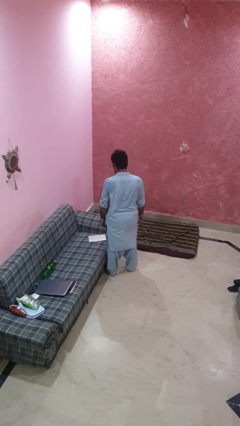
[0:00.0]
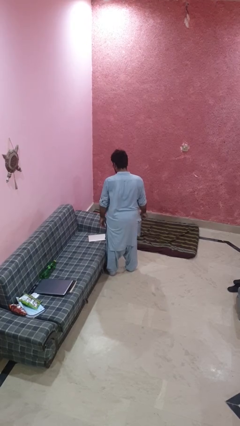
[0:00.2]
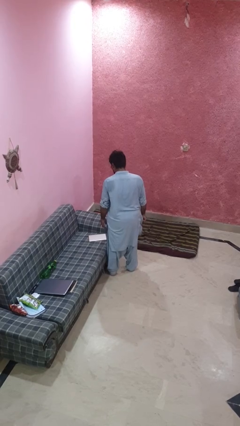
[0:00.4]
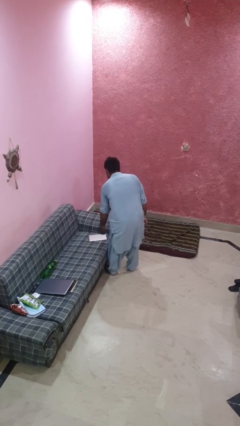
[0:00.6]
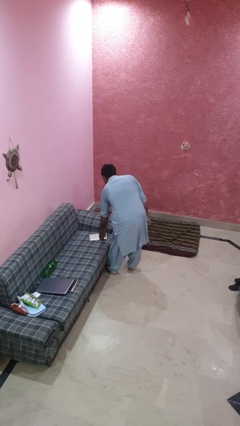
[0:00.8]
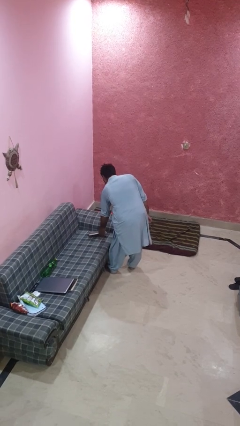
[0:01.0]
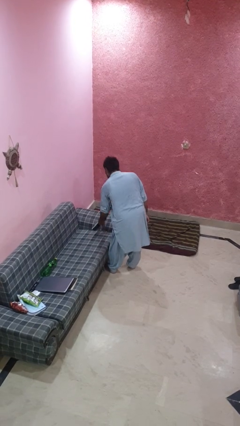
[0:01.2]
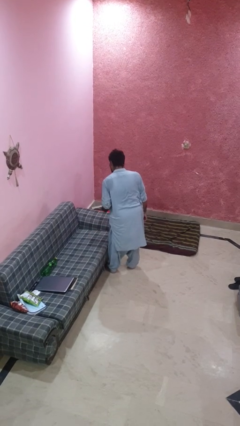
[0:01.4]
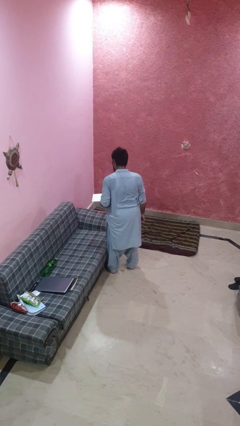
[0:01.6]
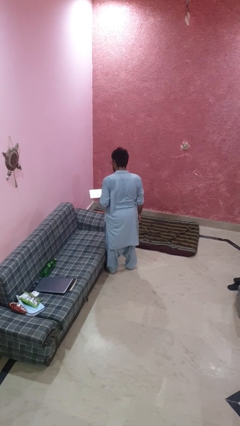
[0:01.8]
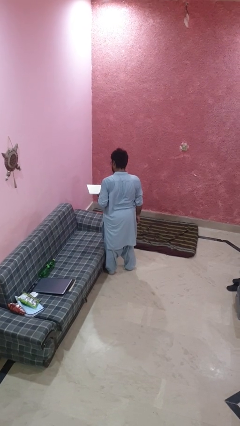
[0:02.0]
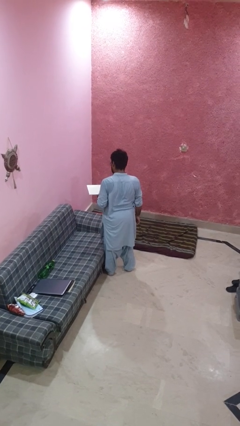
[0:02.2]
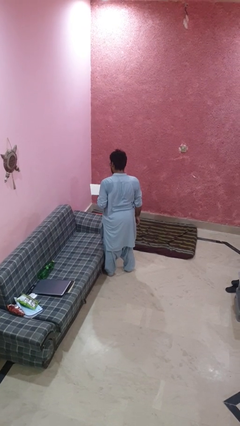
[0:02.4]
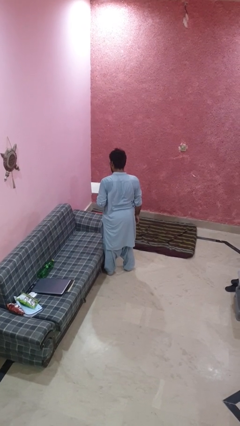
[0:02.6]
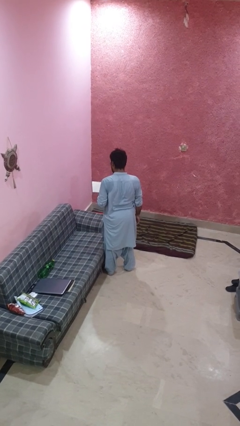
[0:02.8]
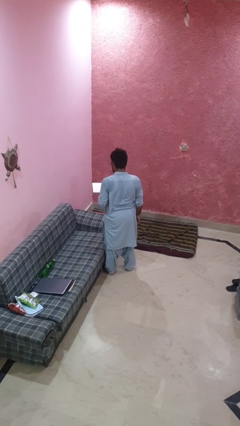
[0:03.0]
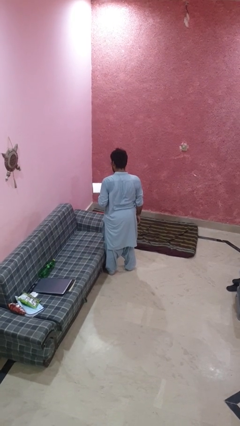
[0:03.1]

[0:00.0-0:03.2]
person picks up object from couch

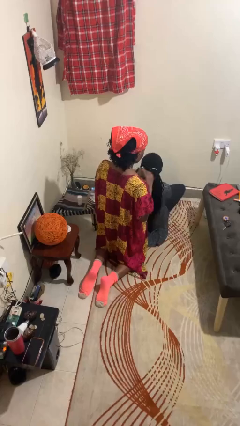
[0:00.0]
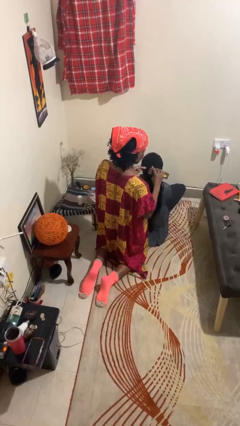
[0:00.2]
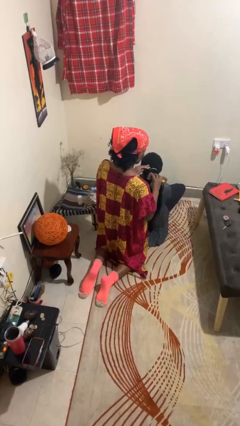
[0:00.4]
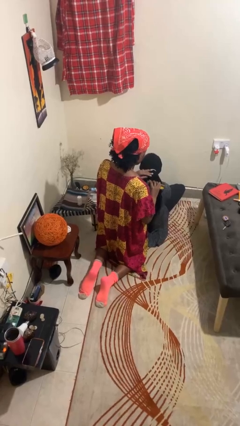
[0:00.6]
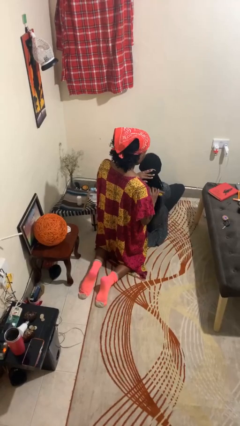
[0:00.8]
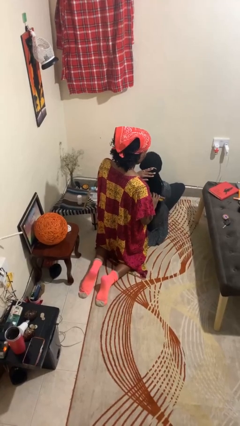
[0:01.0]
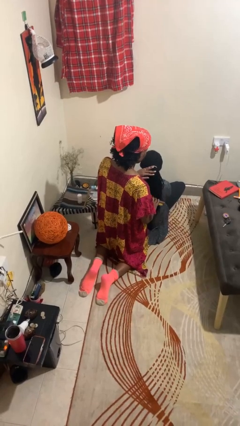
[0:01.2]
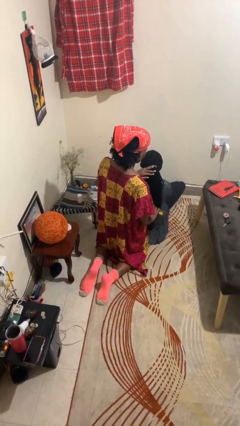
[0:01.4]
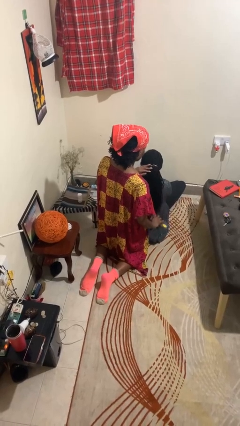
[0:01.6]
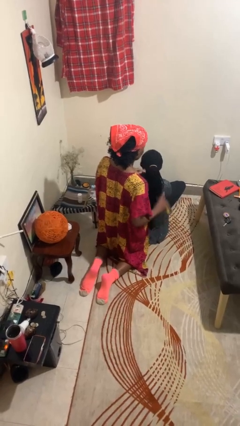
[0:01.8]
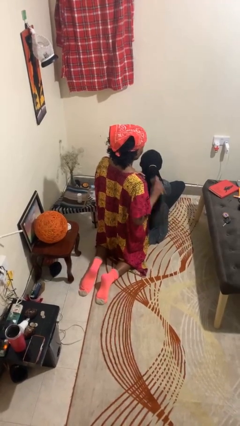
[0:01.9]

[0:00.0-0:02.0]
person brushes hair of person

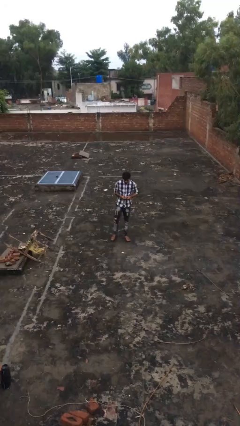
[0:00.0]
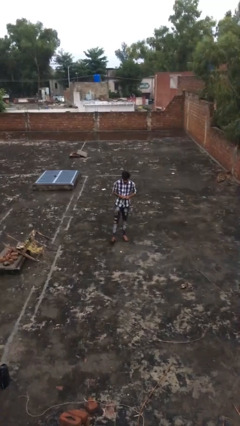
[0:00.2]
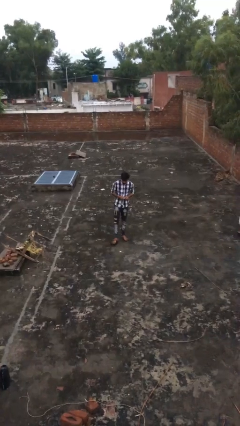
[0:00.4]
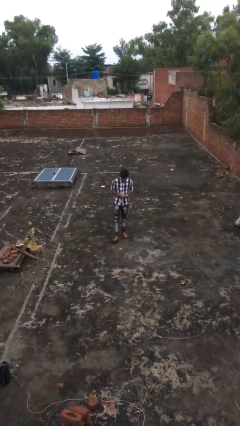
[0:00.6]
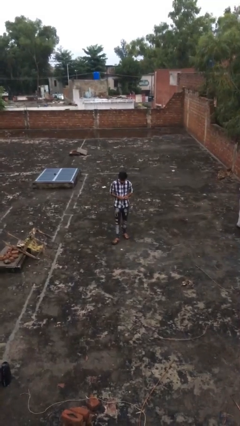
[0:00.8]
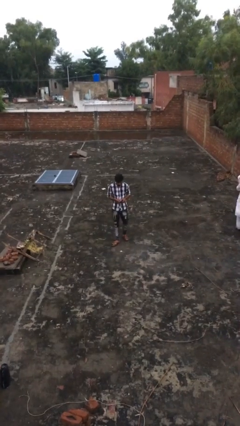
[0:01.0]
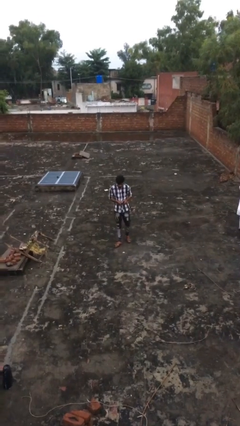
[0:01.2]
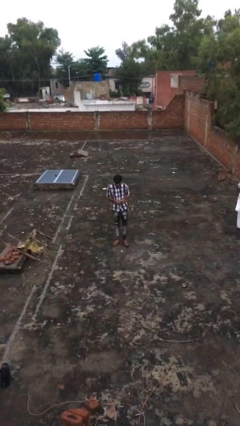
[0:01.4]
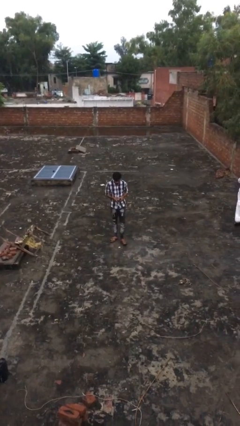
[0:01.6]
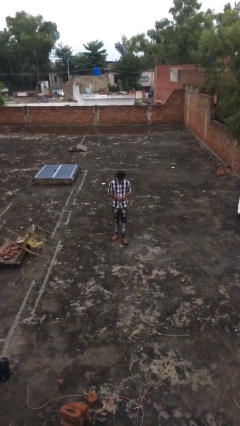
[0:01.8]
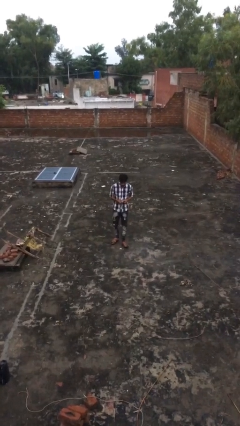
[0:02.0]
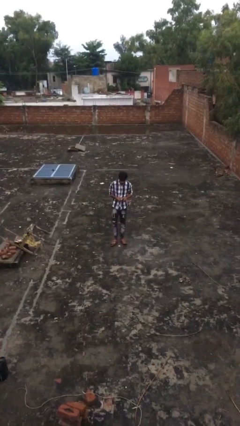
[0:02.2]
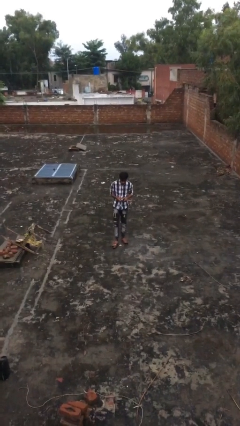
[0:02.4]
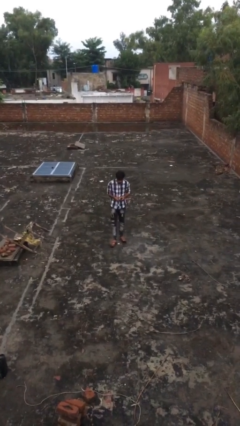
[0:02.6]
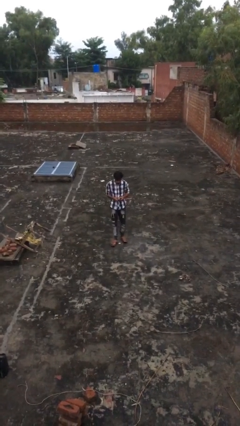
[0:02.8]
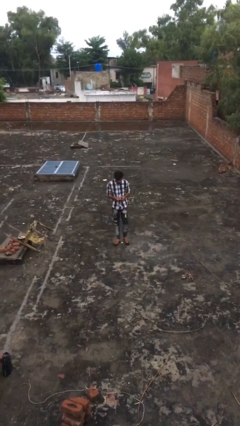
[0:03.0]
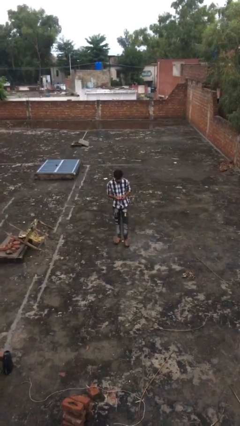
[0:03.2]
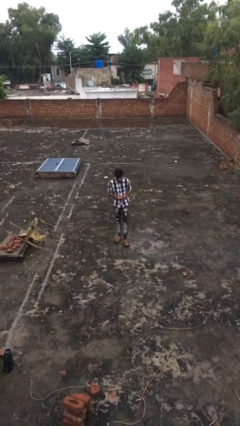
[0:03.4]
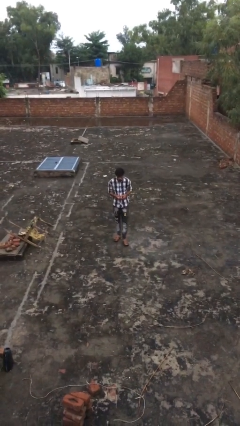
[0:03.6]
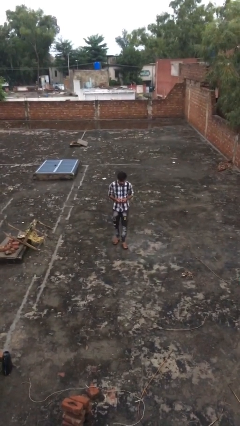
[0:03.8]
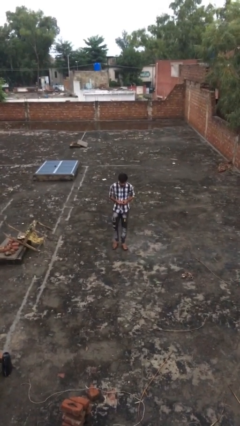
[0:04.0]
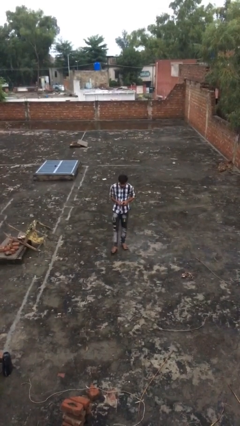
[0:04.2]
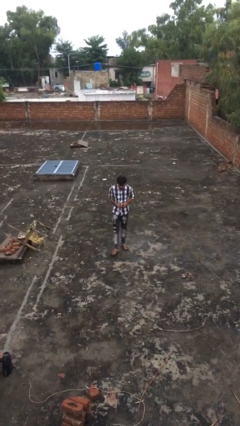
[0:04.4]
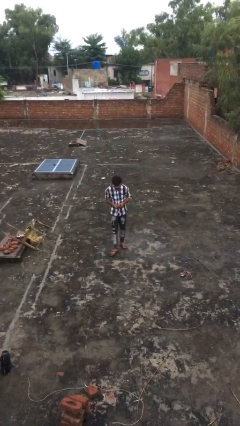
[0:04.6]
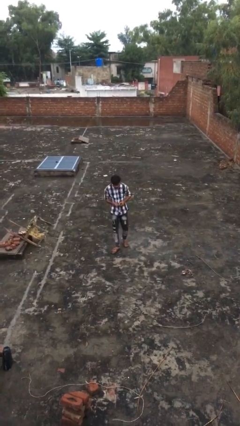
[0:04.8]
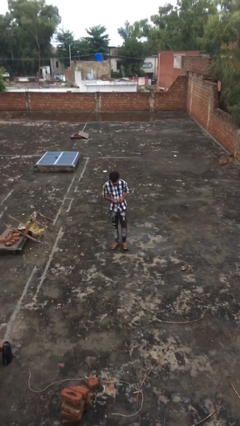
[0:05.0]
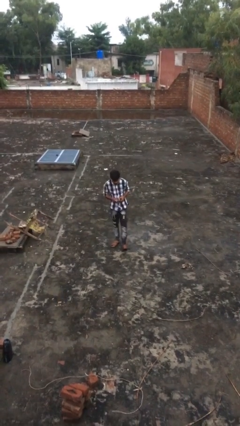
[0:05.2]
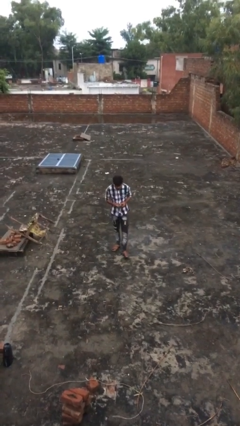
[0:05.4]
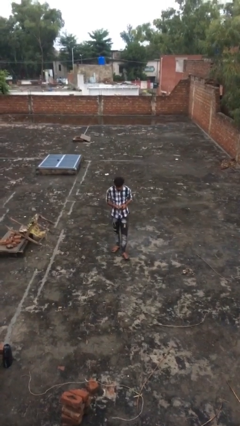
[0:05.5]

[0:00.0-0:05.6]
person texts on phone

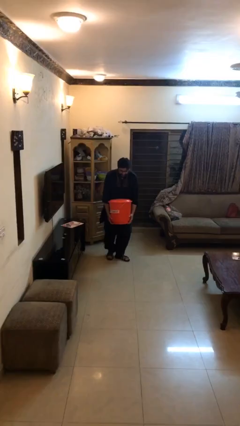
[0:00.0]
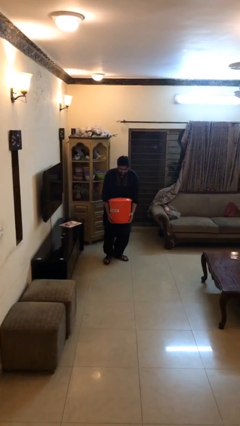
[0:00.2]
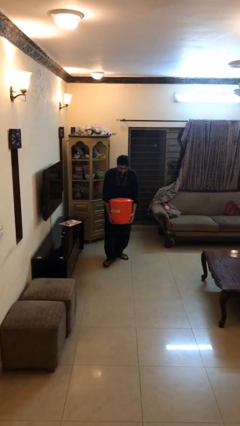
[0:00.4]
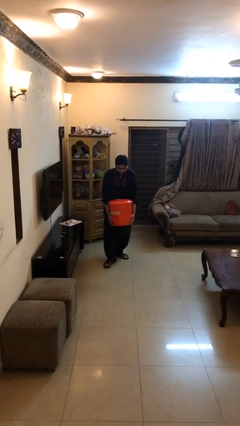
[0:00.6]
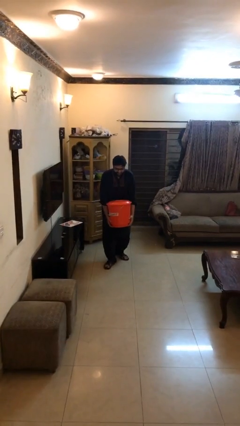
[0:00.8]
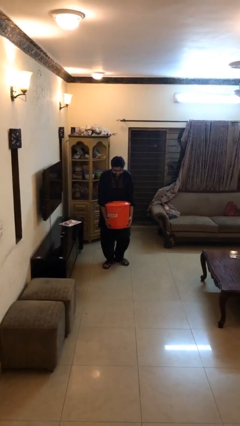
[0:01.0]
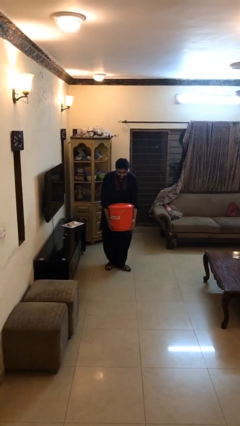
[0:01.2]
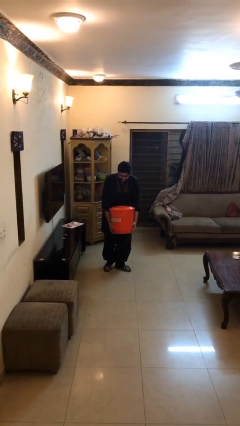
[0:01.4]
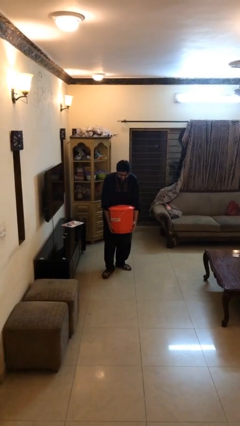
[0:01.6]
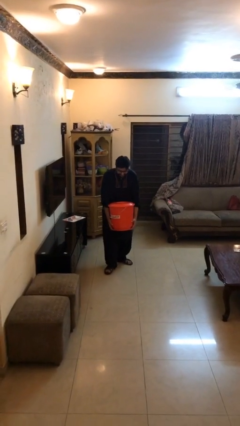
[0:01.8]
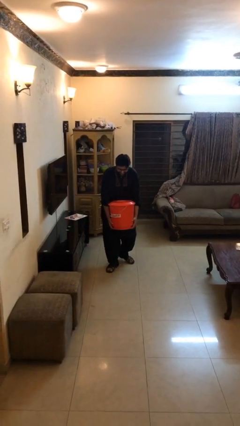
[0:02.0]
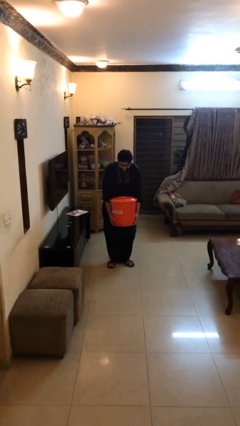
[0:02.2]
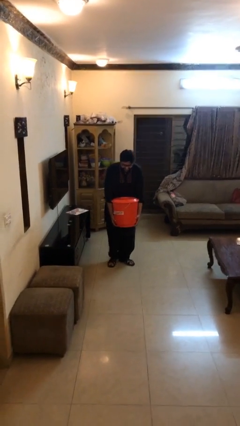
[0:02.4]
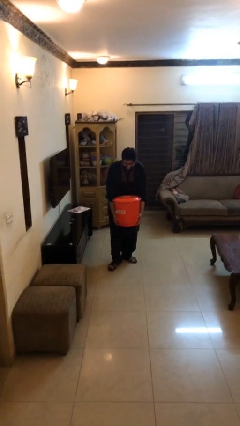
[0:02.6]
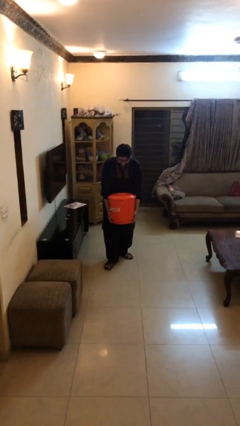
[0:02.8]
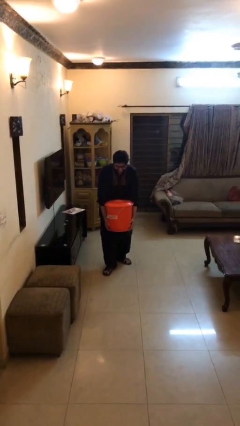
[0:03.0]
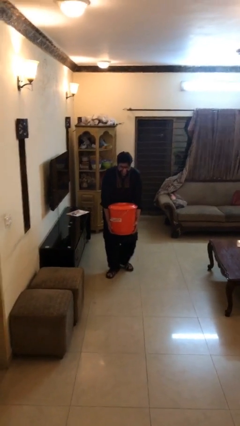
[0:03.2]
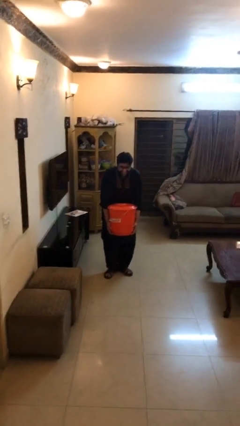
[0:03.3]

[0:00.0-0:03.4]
person carries heavy object

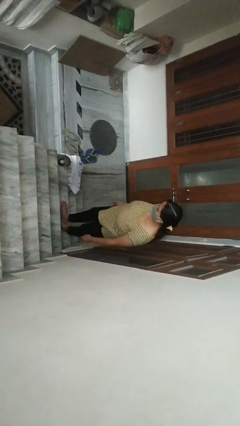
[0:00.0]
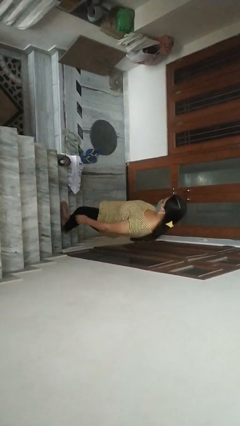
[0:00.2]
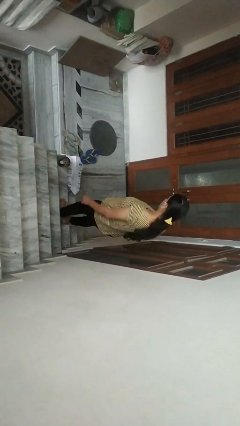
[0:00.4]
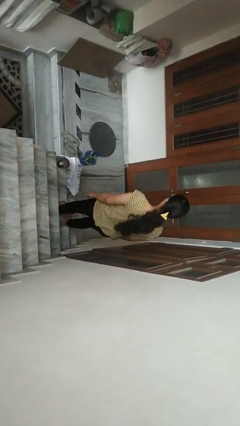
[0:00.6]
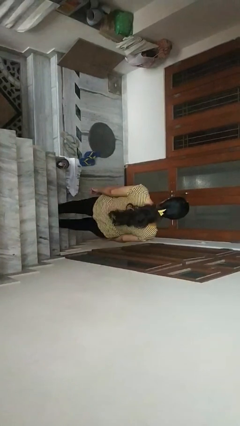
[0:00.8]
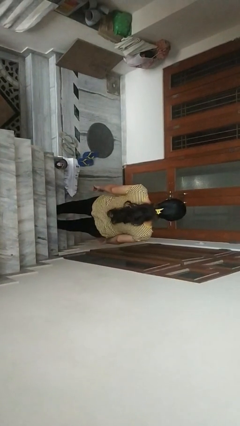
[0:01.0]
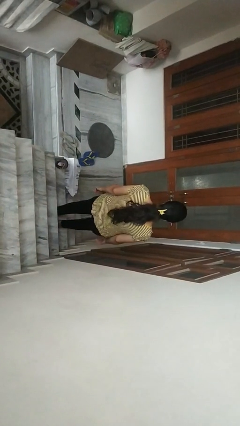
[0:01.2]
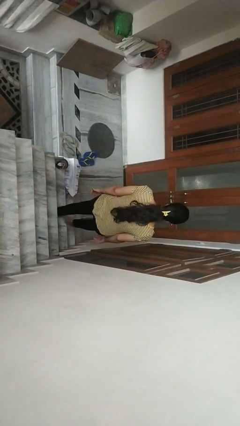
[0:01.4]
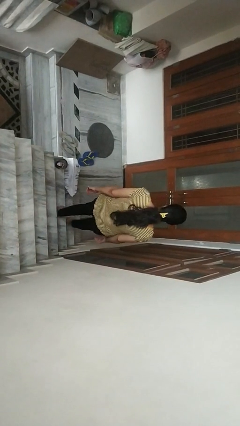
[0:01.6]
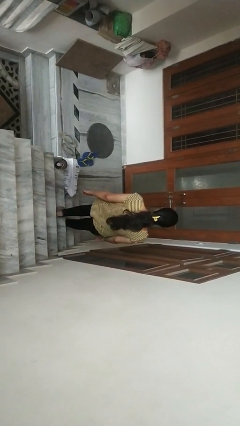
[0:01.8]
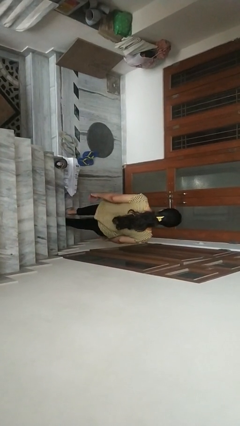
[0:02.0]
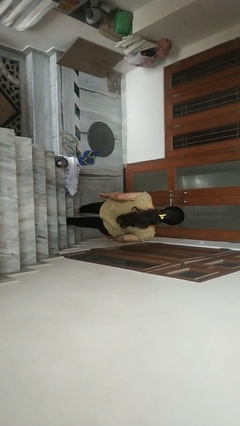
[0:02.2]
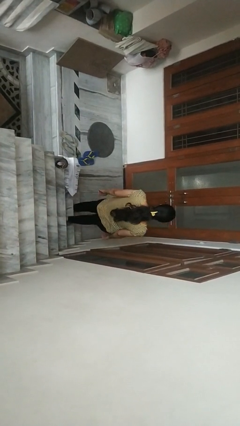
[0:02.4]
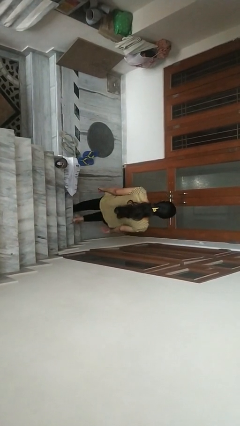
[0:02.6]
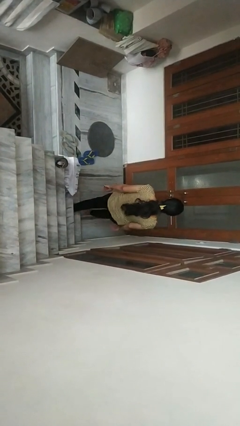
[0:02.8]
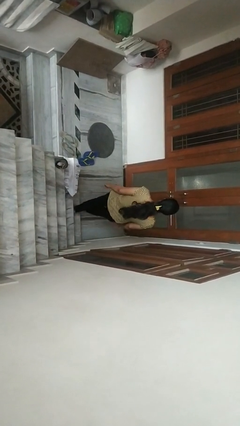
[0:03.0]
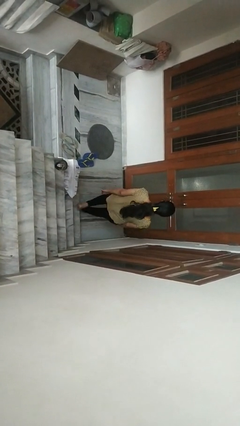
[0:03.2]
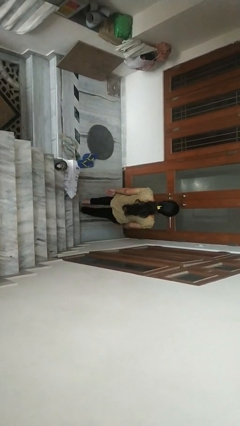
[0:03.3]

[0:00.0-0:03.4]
person climbs down stairs
